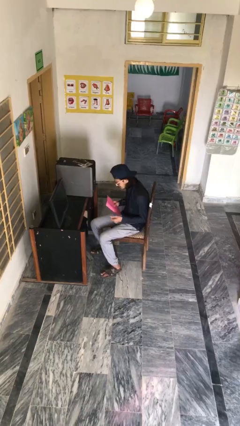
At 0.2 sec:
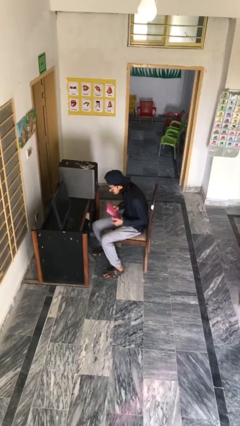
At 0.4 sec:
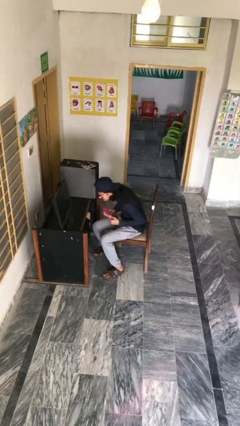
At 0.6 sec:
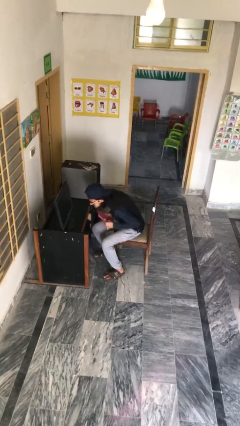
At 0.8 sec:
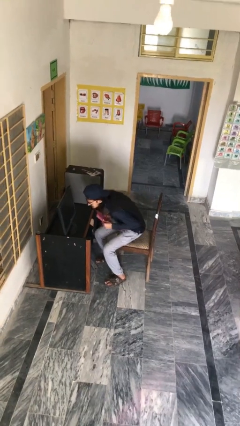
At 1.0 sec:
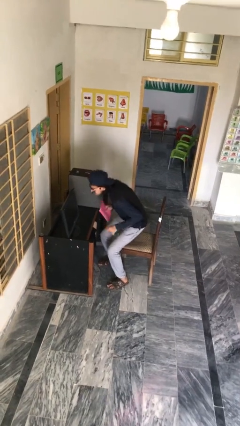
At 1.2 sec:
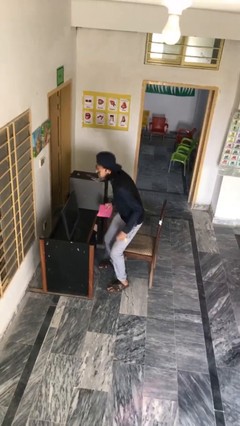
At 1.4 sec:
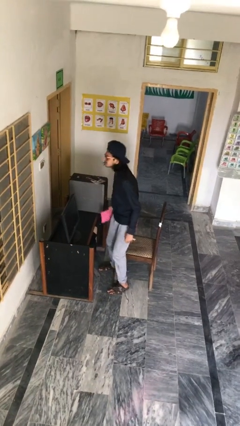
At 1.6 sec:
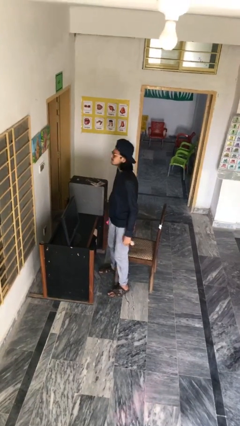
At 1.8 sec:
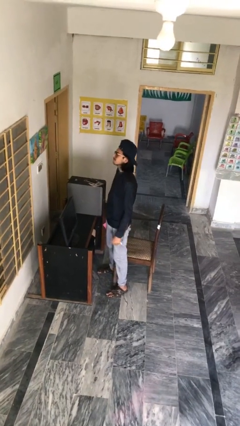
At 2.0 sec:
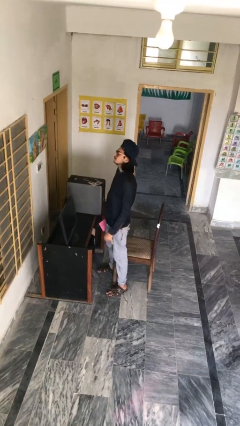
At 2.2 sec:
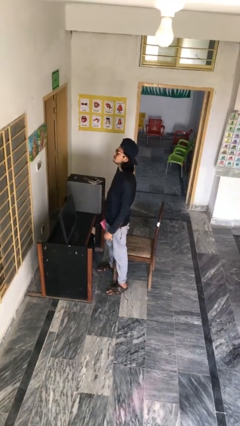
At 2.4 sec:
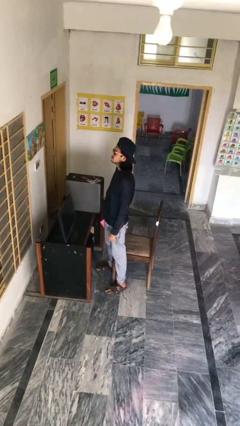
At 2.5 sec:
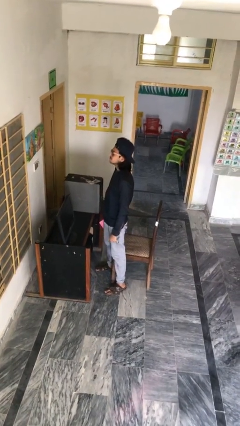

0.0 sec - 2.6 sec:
person stands up

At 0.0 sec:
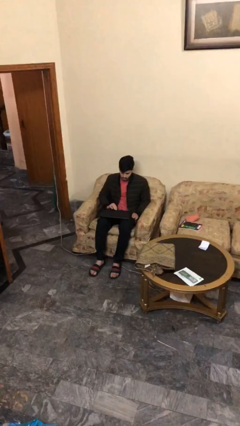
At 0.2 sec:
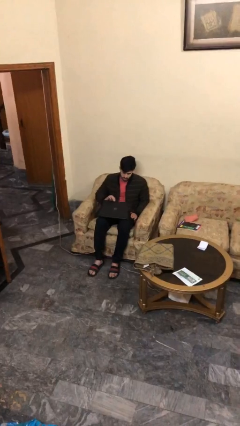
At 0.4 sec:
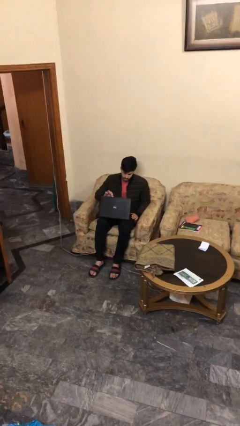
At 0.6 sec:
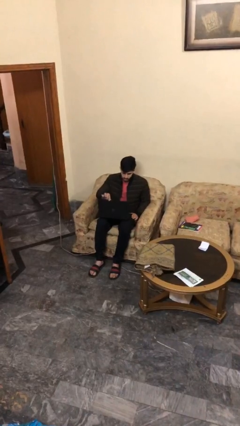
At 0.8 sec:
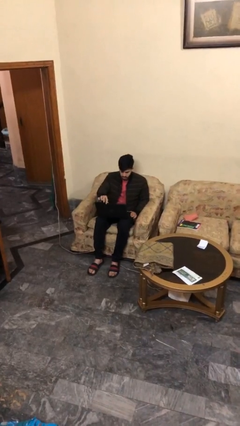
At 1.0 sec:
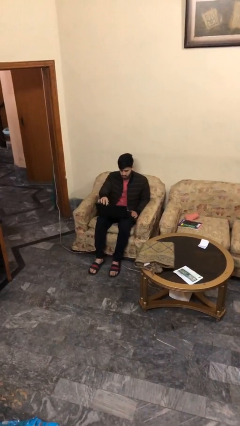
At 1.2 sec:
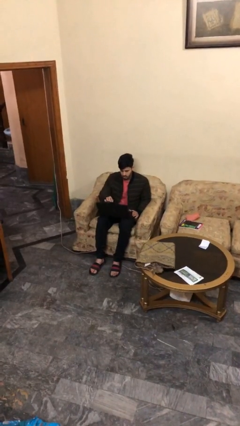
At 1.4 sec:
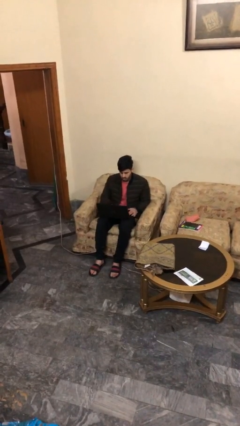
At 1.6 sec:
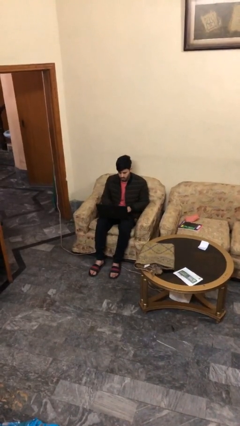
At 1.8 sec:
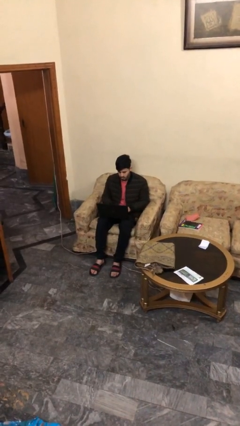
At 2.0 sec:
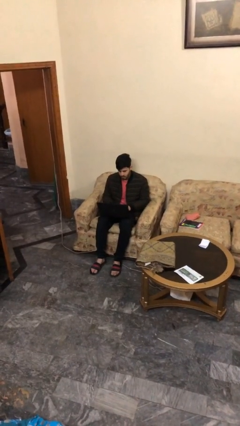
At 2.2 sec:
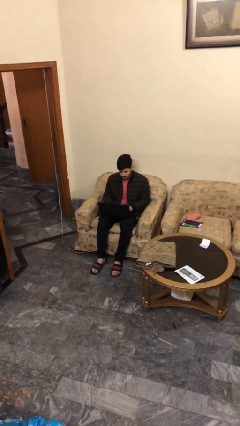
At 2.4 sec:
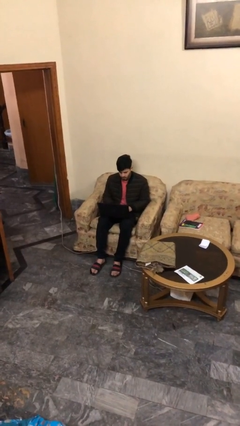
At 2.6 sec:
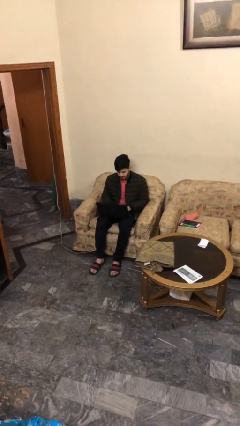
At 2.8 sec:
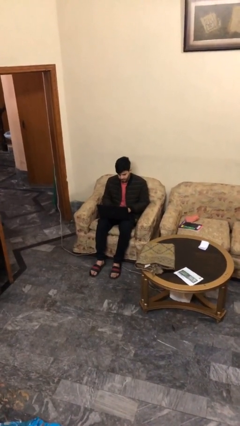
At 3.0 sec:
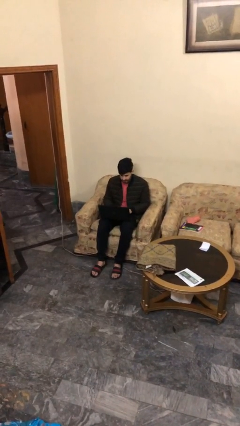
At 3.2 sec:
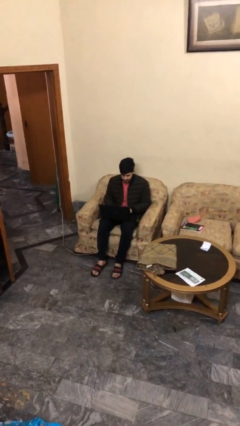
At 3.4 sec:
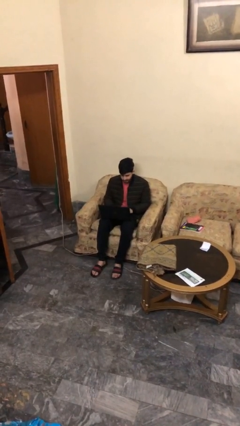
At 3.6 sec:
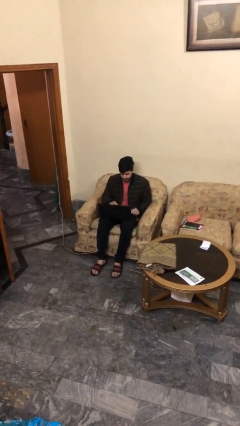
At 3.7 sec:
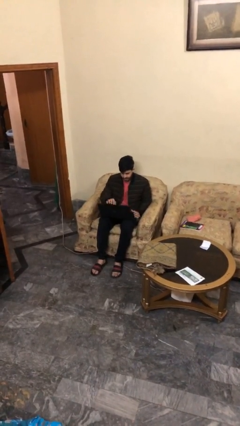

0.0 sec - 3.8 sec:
person interacts with laptop

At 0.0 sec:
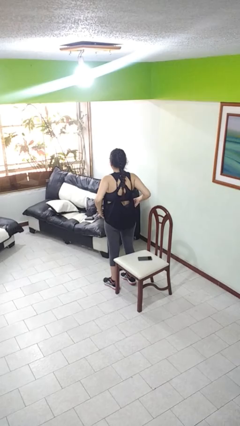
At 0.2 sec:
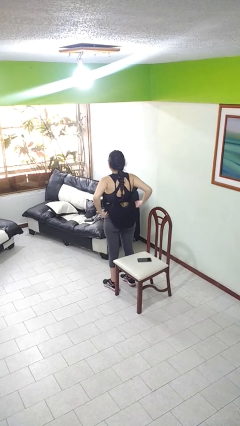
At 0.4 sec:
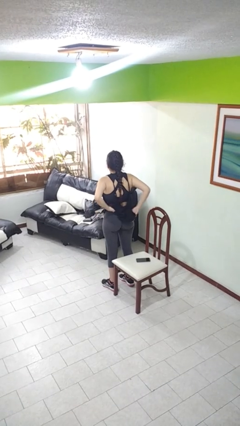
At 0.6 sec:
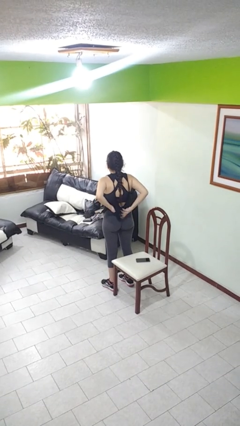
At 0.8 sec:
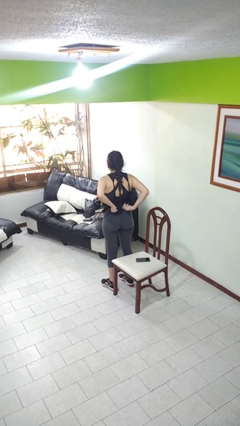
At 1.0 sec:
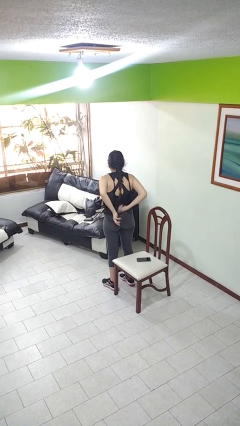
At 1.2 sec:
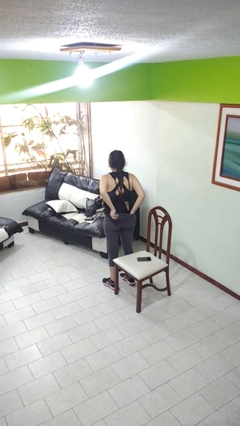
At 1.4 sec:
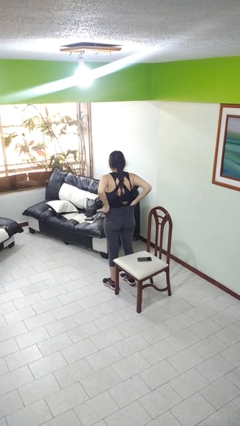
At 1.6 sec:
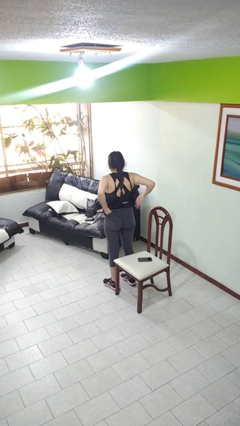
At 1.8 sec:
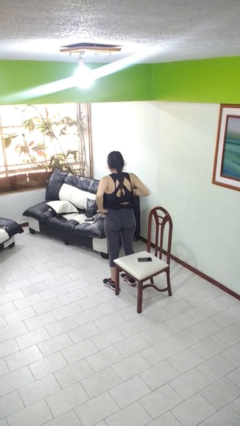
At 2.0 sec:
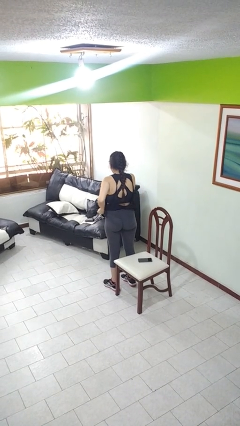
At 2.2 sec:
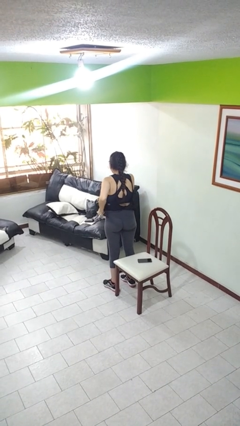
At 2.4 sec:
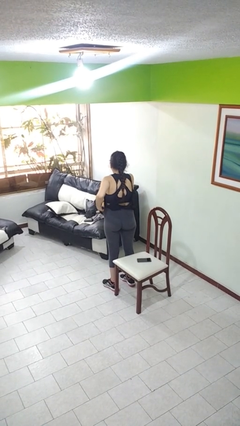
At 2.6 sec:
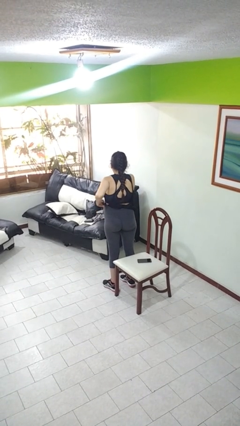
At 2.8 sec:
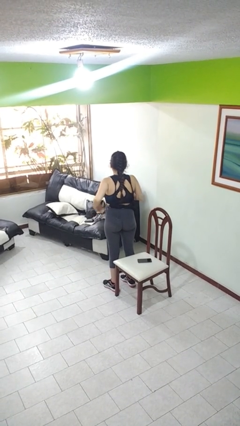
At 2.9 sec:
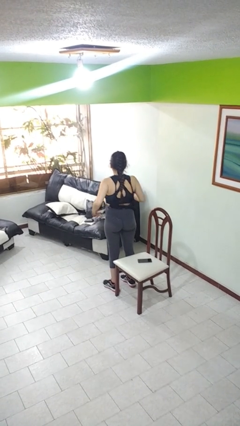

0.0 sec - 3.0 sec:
person tucks in shirt

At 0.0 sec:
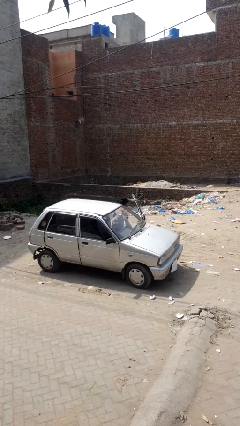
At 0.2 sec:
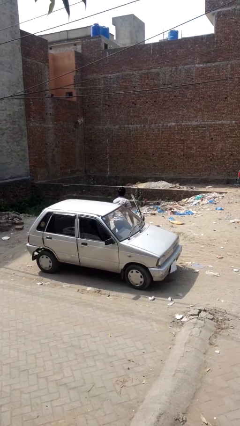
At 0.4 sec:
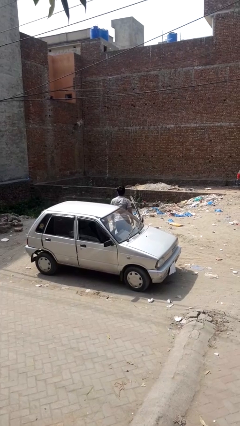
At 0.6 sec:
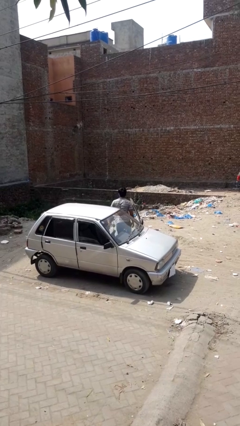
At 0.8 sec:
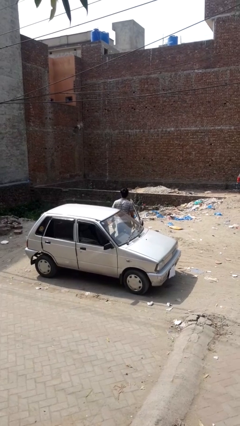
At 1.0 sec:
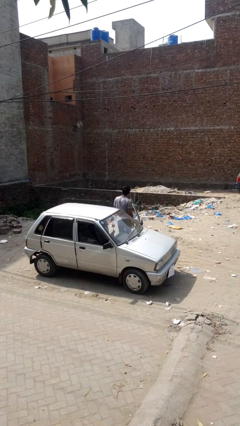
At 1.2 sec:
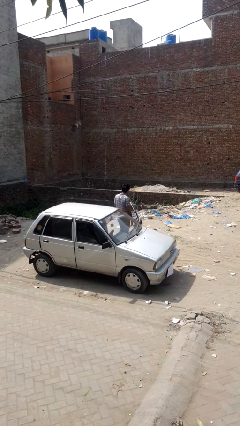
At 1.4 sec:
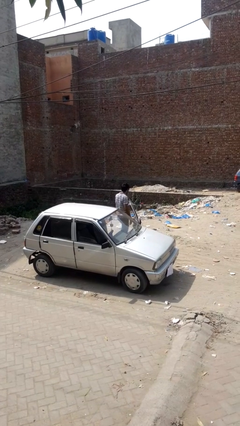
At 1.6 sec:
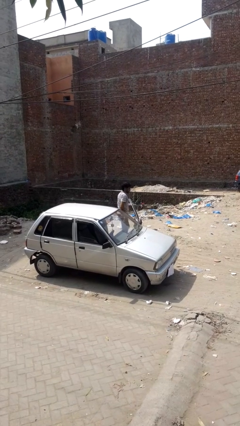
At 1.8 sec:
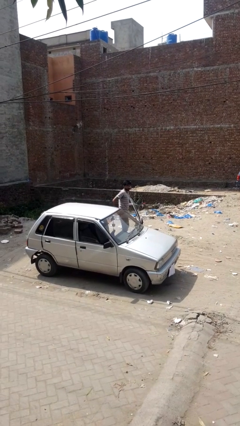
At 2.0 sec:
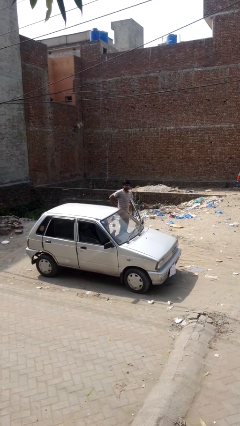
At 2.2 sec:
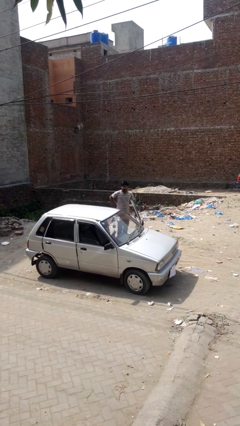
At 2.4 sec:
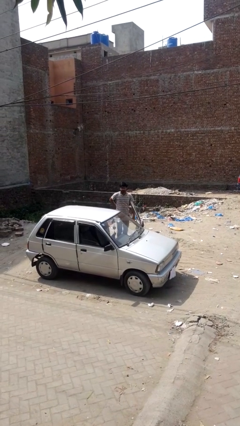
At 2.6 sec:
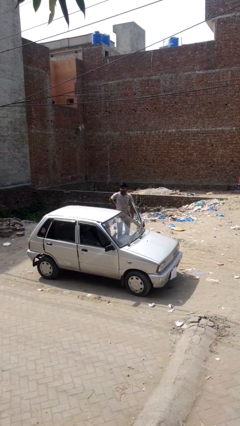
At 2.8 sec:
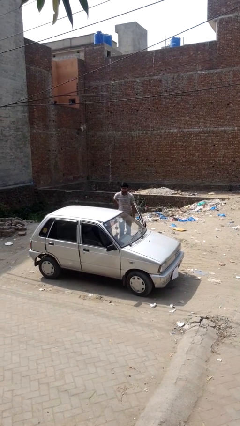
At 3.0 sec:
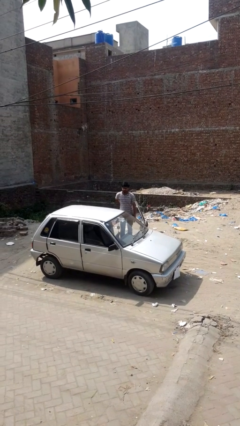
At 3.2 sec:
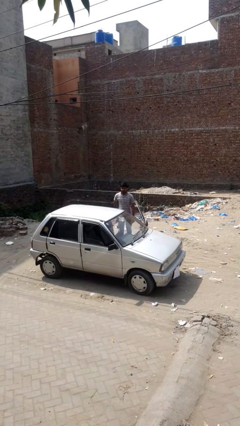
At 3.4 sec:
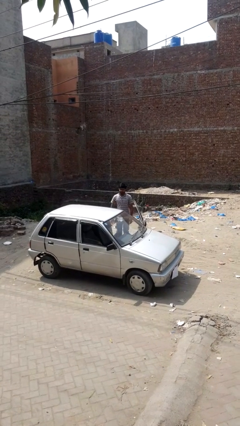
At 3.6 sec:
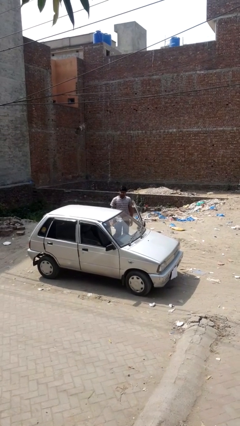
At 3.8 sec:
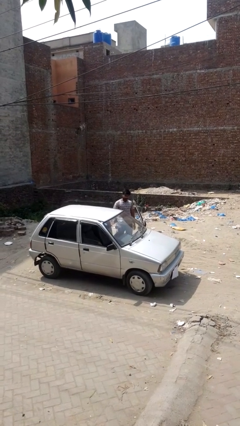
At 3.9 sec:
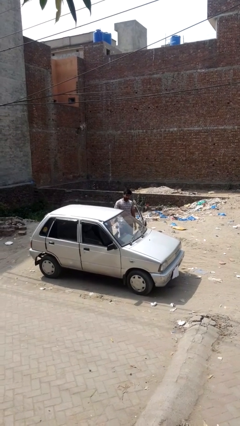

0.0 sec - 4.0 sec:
person exits car

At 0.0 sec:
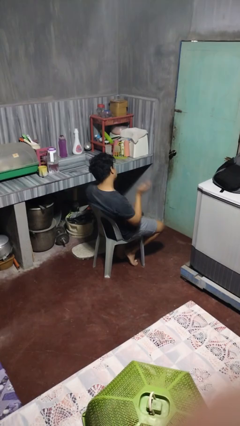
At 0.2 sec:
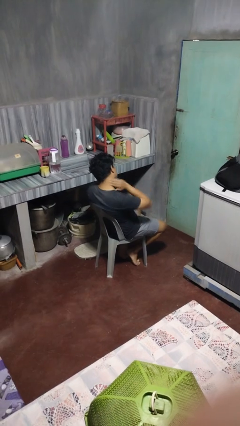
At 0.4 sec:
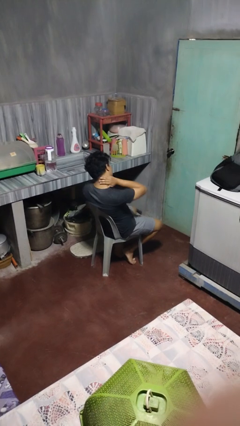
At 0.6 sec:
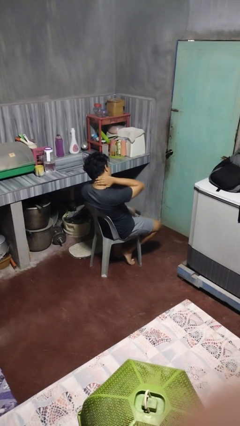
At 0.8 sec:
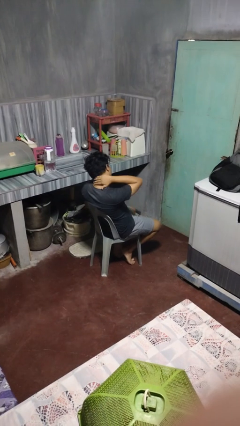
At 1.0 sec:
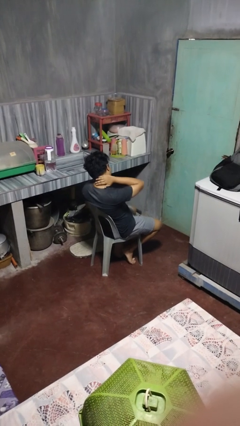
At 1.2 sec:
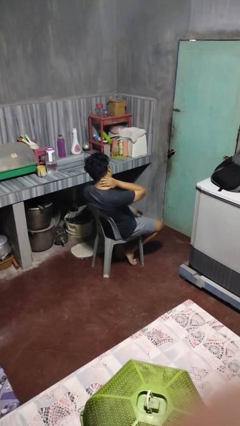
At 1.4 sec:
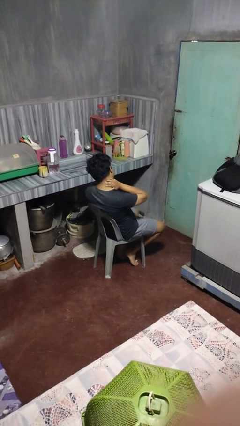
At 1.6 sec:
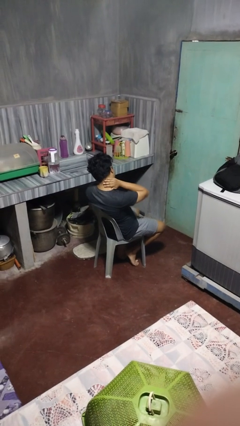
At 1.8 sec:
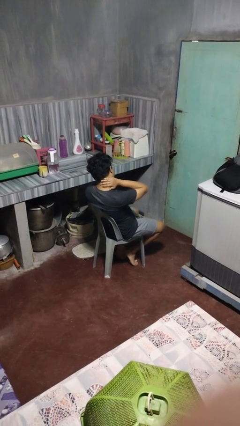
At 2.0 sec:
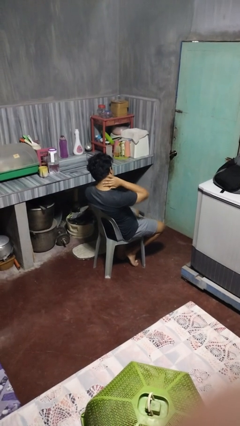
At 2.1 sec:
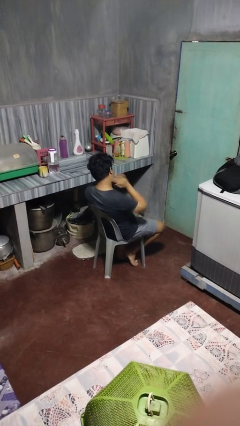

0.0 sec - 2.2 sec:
person rubs neck

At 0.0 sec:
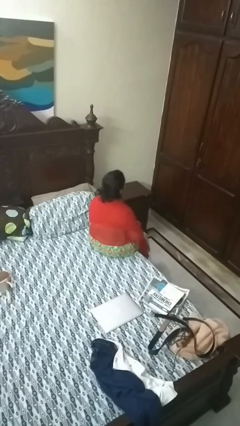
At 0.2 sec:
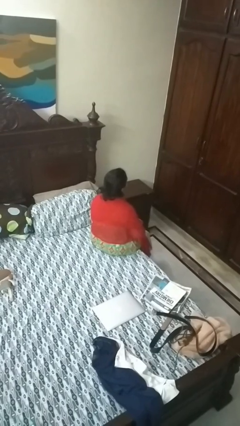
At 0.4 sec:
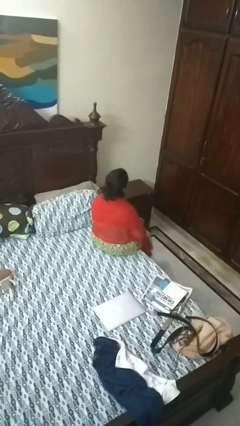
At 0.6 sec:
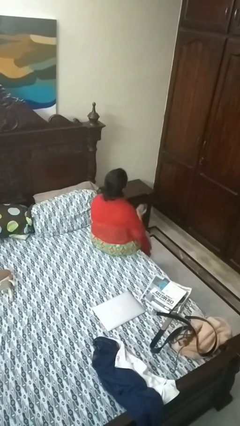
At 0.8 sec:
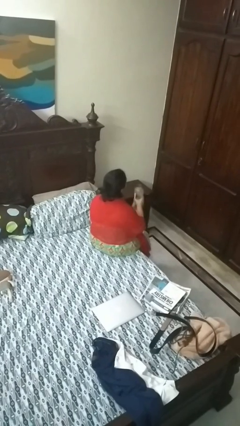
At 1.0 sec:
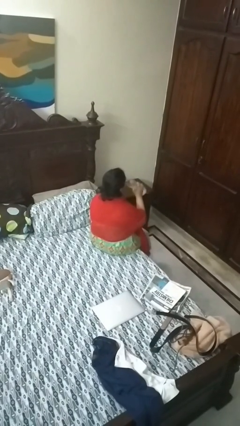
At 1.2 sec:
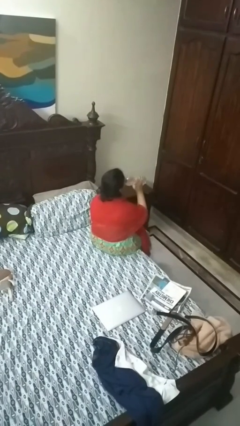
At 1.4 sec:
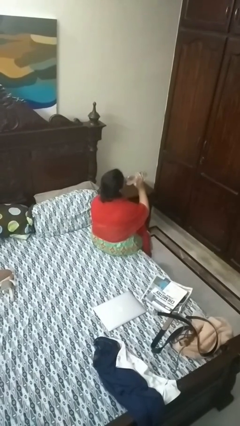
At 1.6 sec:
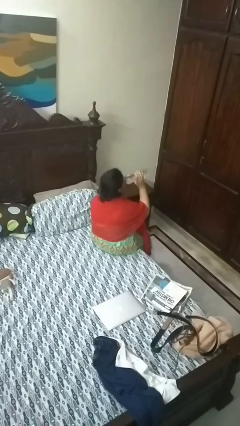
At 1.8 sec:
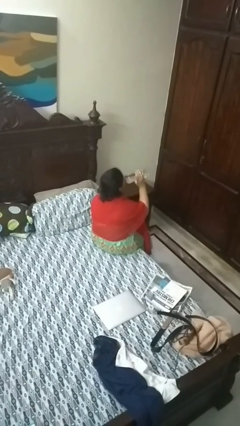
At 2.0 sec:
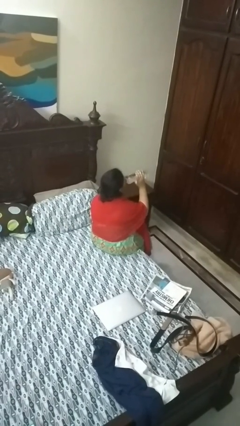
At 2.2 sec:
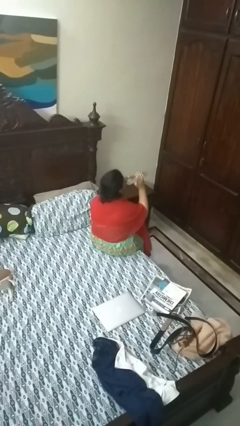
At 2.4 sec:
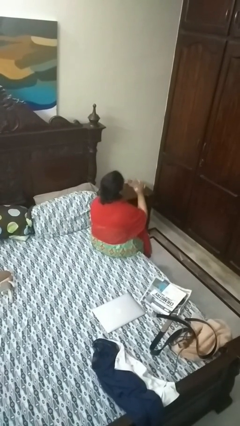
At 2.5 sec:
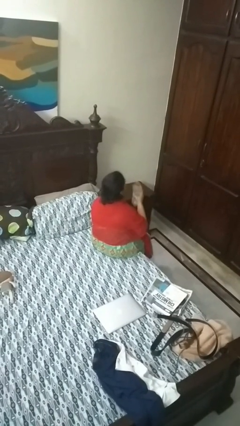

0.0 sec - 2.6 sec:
person drinks from bottle